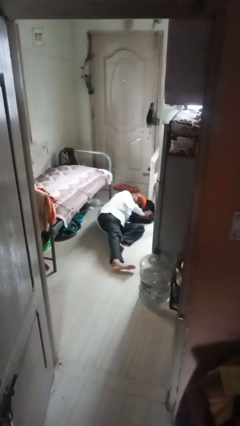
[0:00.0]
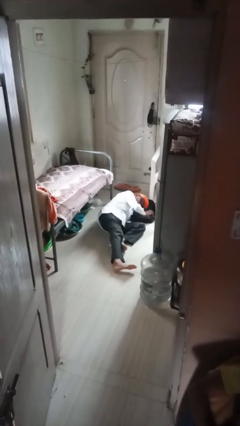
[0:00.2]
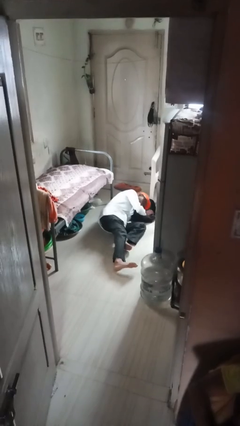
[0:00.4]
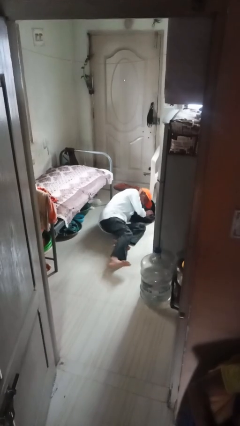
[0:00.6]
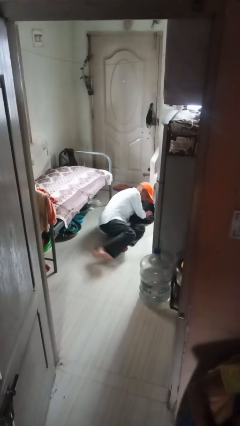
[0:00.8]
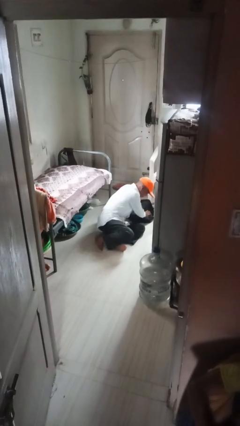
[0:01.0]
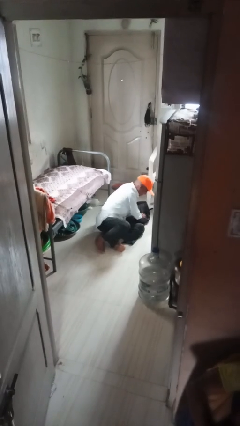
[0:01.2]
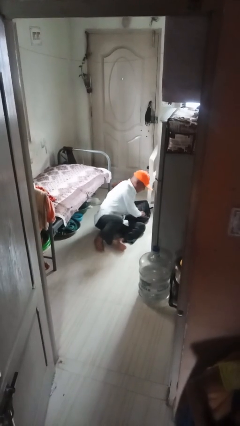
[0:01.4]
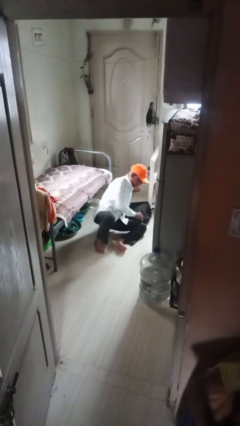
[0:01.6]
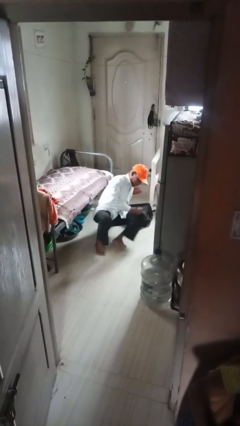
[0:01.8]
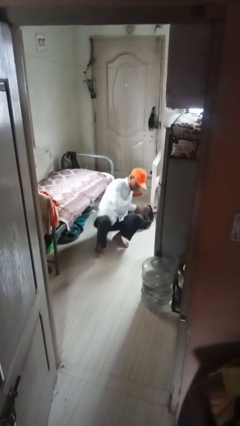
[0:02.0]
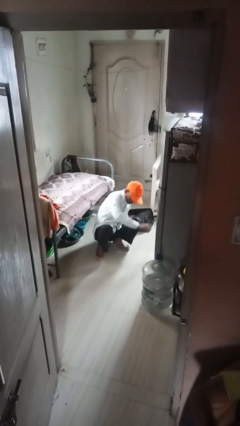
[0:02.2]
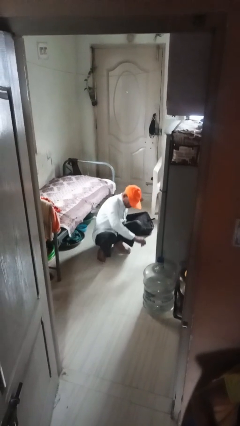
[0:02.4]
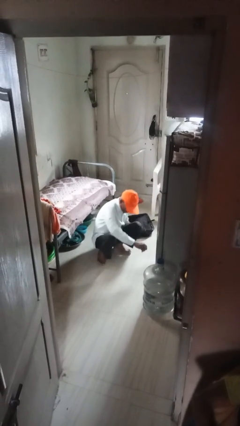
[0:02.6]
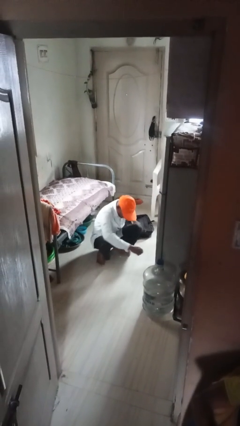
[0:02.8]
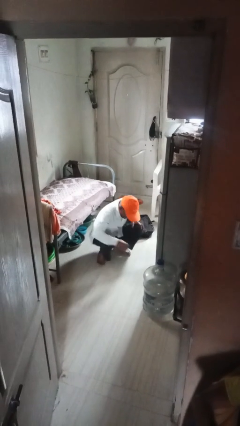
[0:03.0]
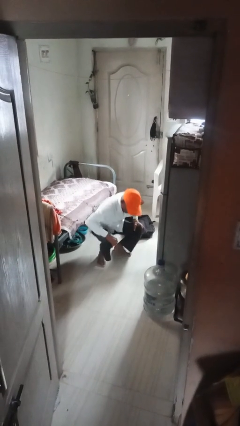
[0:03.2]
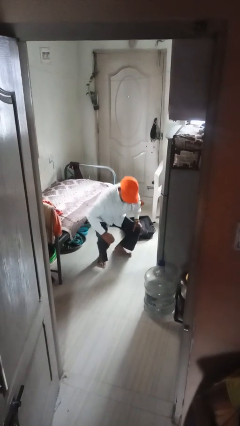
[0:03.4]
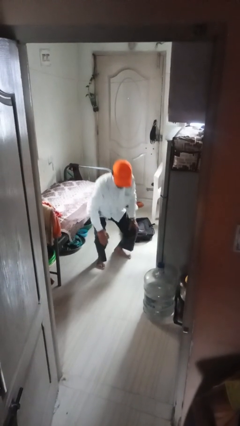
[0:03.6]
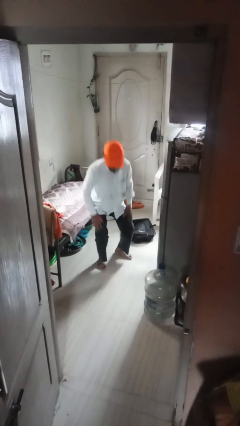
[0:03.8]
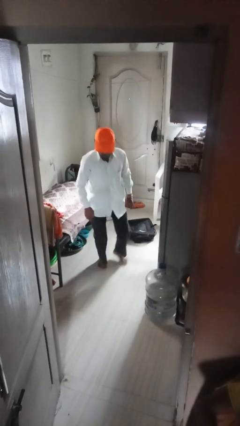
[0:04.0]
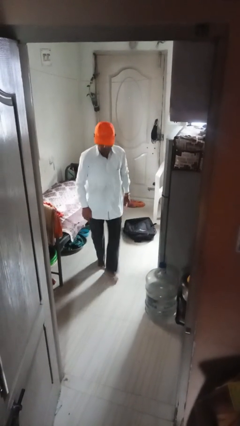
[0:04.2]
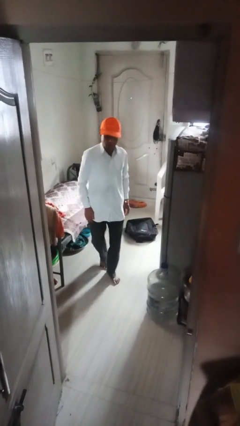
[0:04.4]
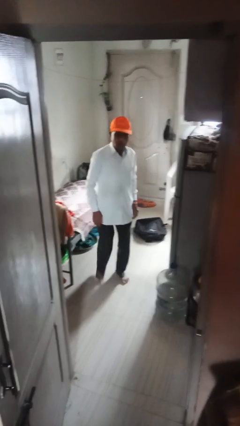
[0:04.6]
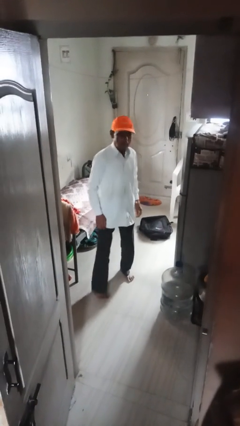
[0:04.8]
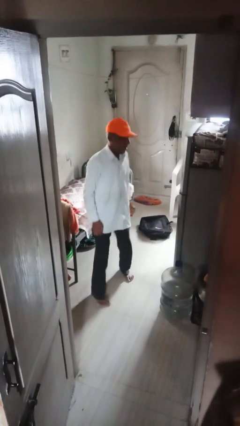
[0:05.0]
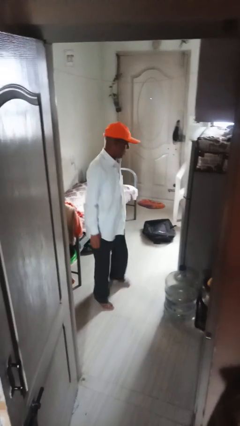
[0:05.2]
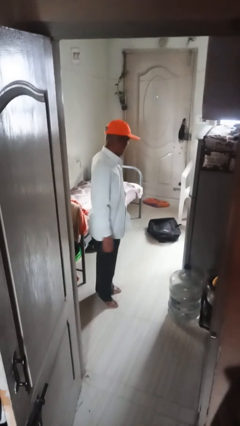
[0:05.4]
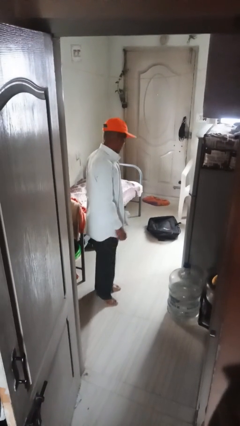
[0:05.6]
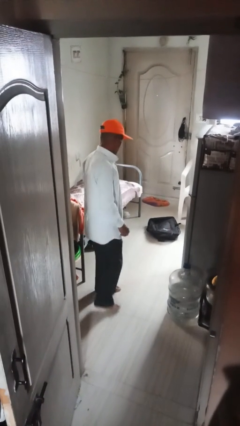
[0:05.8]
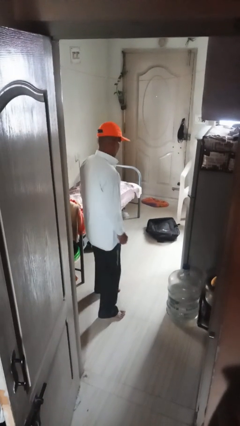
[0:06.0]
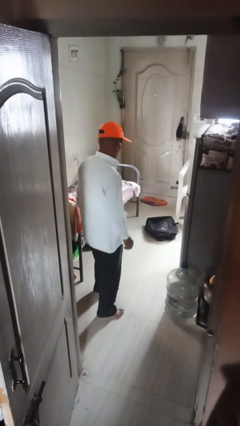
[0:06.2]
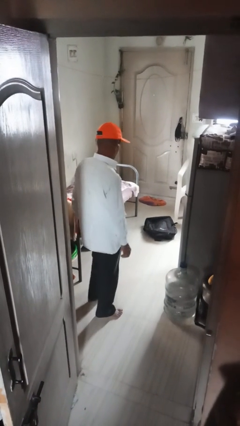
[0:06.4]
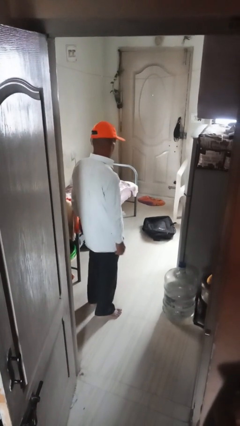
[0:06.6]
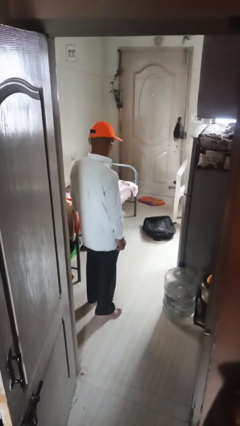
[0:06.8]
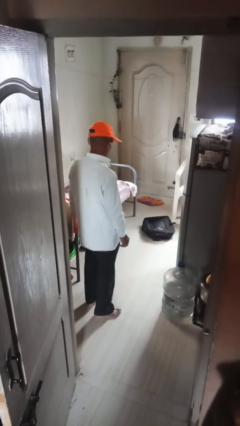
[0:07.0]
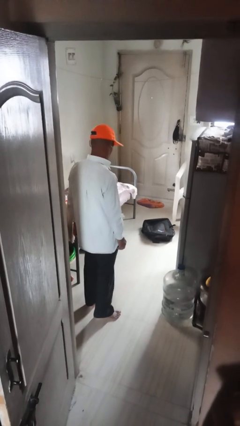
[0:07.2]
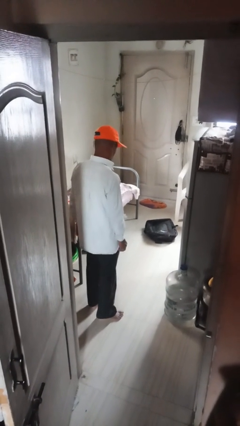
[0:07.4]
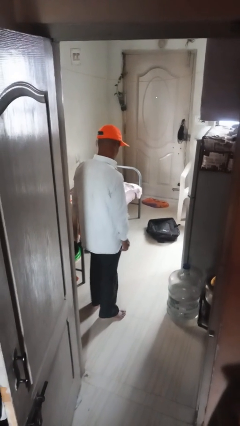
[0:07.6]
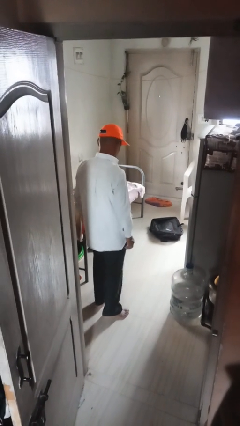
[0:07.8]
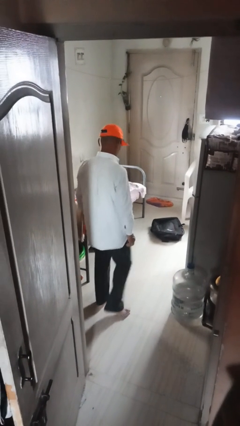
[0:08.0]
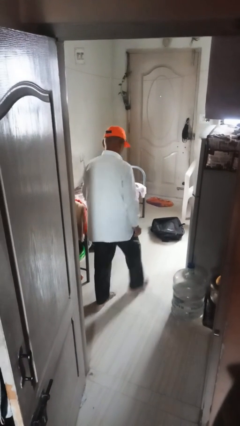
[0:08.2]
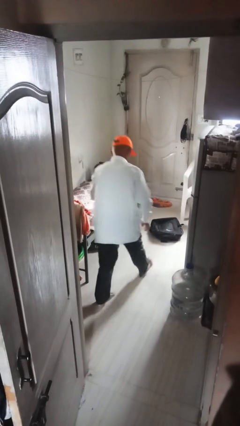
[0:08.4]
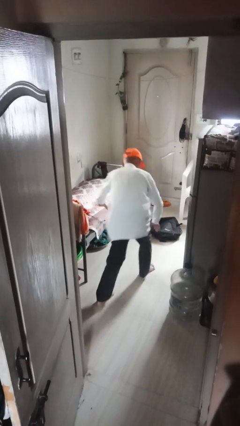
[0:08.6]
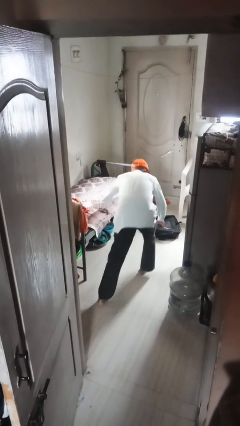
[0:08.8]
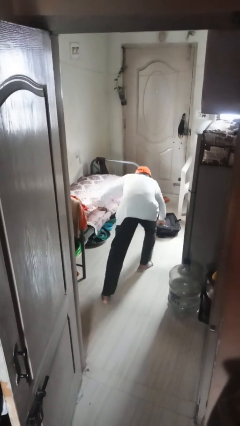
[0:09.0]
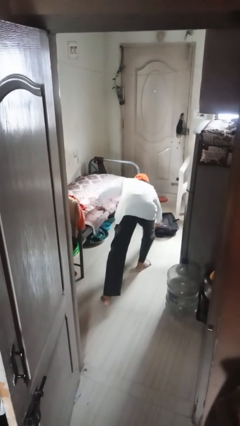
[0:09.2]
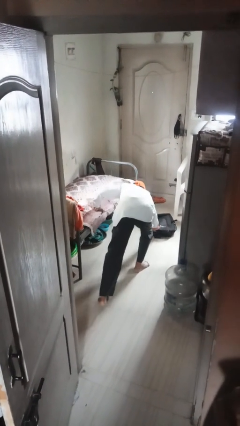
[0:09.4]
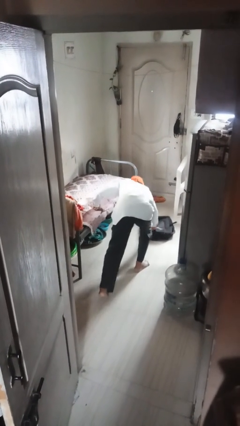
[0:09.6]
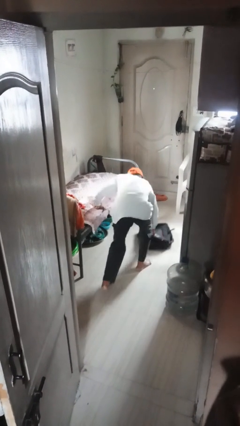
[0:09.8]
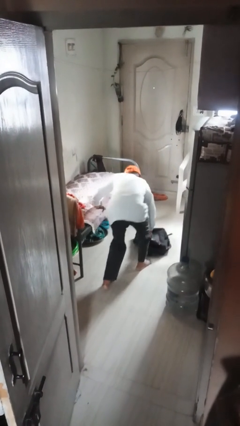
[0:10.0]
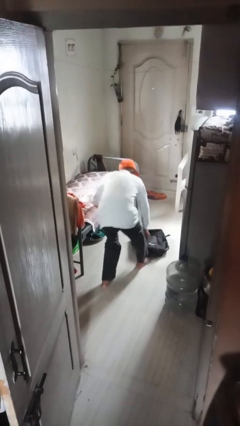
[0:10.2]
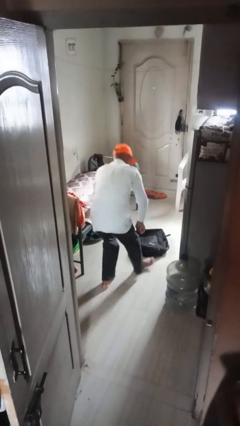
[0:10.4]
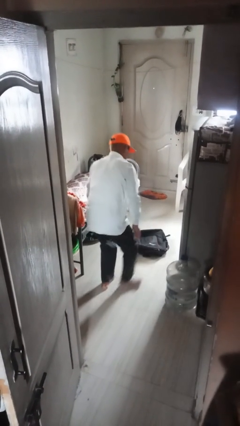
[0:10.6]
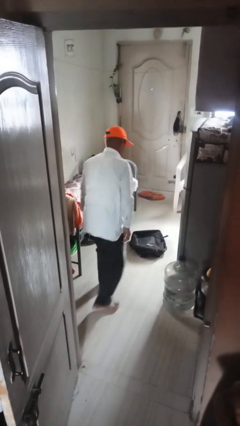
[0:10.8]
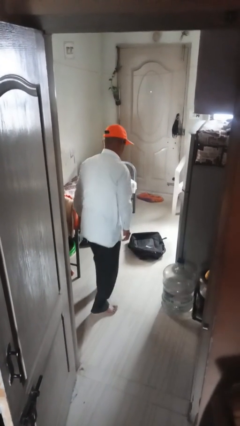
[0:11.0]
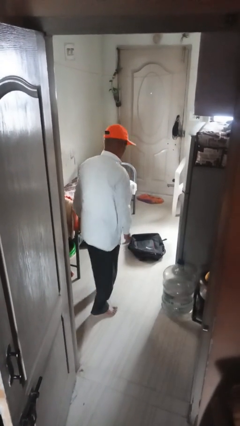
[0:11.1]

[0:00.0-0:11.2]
person stands up from floor

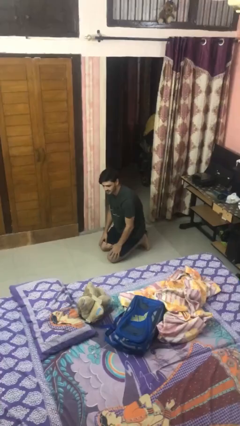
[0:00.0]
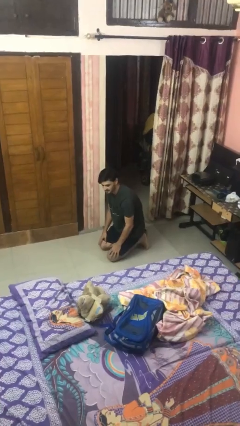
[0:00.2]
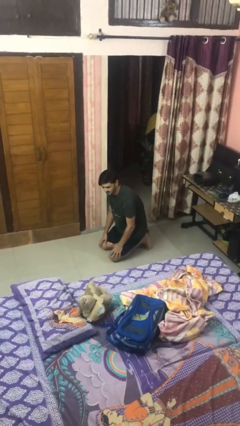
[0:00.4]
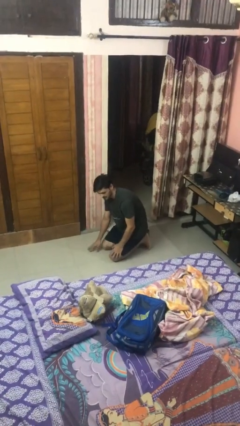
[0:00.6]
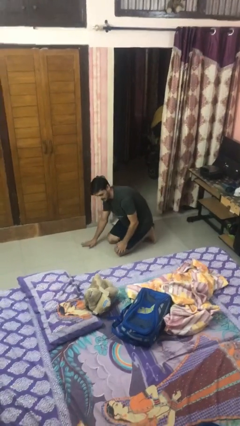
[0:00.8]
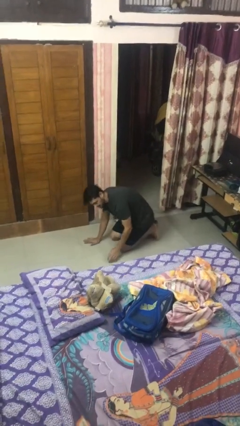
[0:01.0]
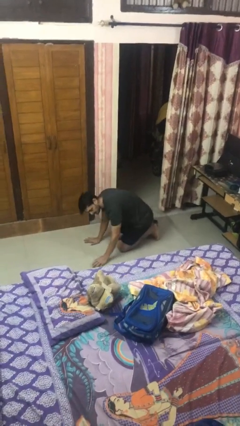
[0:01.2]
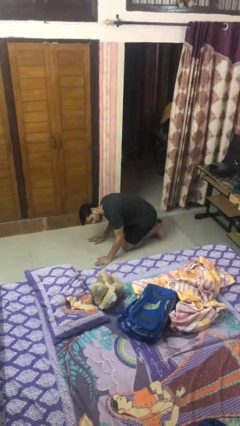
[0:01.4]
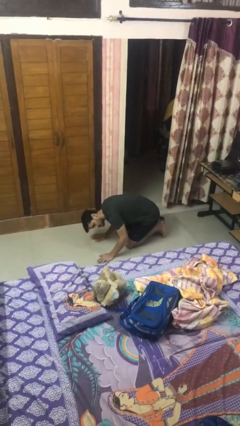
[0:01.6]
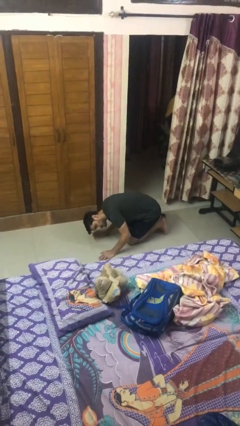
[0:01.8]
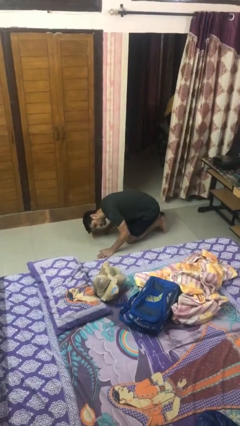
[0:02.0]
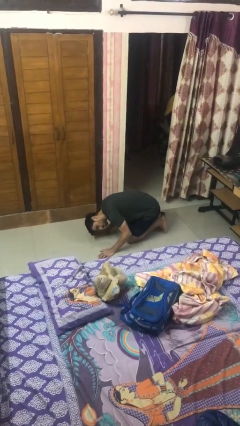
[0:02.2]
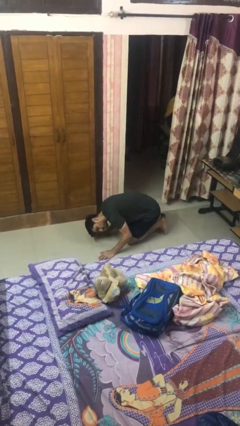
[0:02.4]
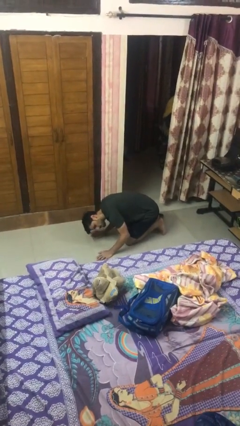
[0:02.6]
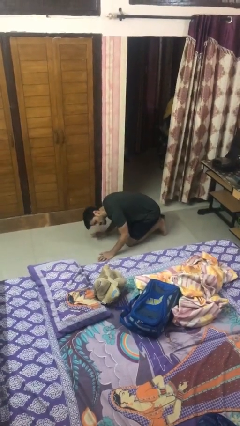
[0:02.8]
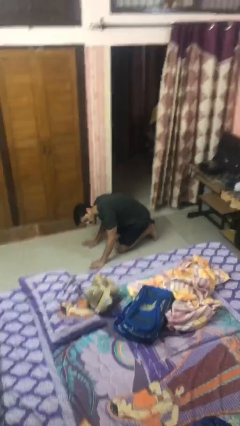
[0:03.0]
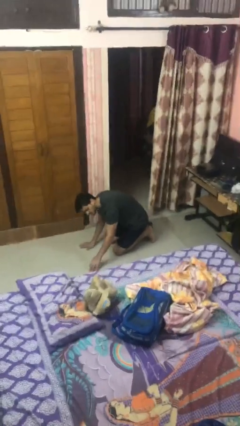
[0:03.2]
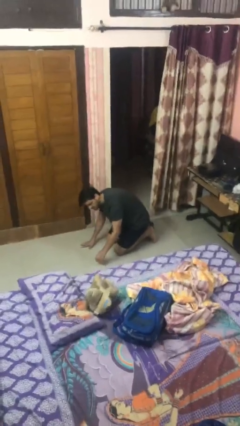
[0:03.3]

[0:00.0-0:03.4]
person searches under bed

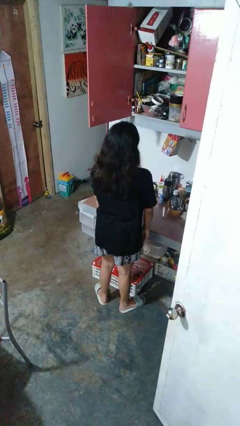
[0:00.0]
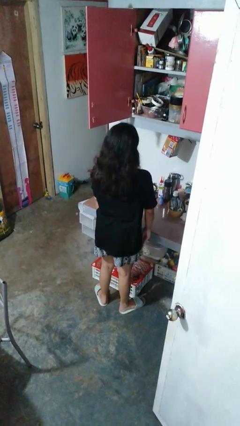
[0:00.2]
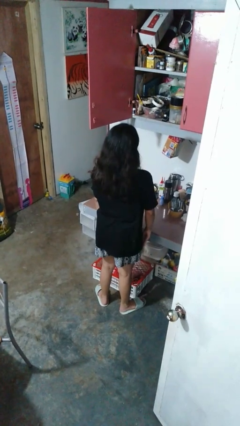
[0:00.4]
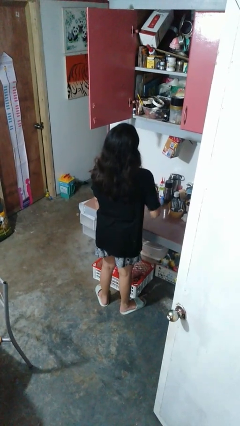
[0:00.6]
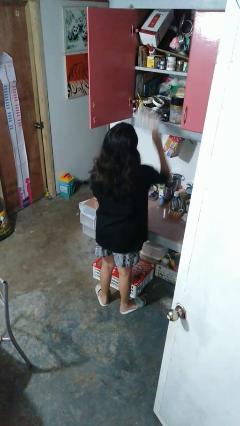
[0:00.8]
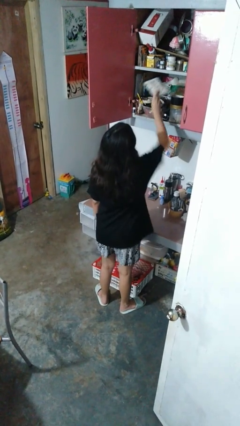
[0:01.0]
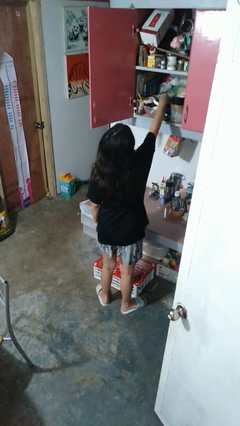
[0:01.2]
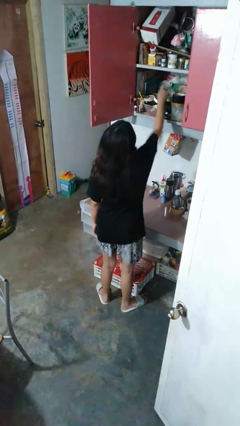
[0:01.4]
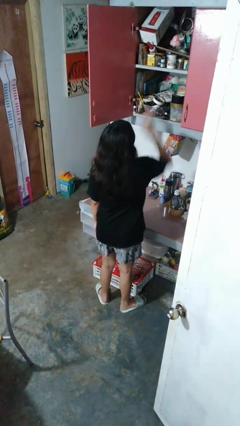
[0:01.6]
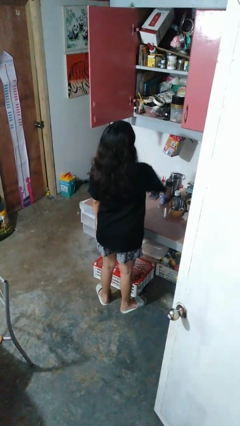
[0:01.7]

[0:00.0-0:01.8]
person puts object in cabinet

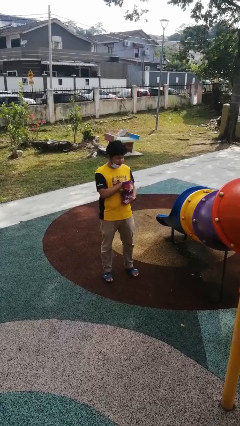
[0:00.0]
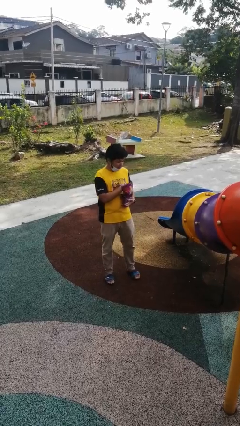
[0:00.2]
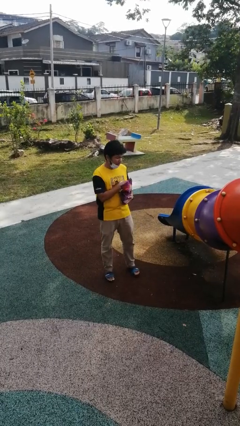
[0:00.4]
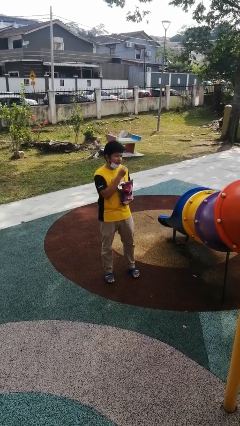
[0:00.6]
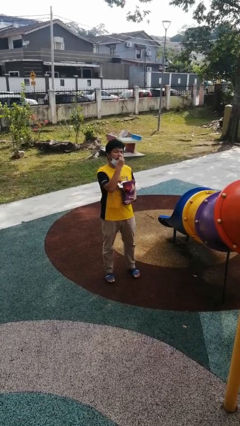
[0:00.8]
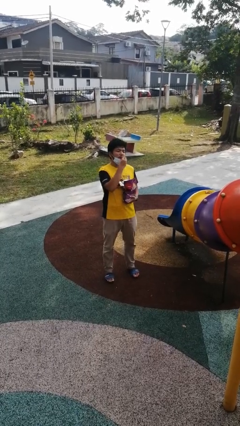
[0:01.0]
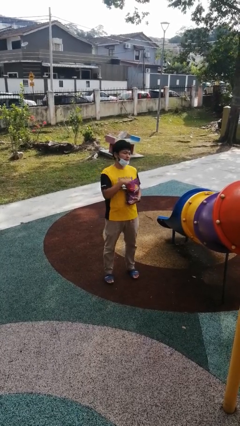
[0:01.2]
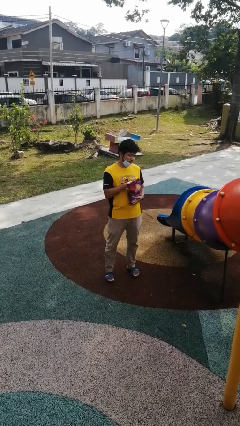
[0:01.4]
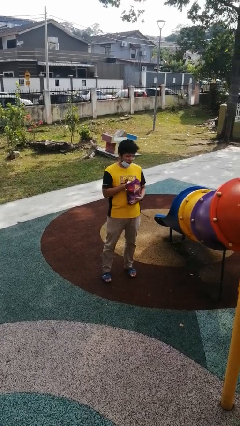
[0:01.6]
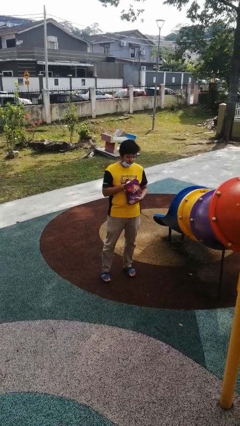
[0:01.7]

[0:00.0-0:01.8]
person eats snack from bag

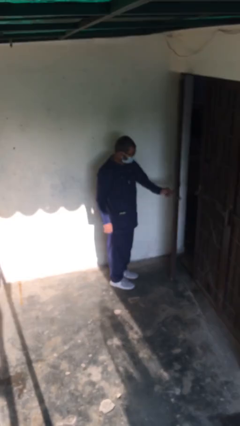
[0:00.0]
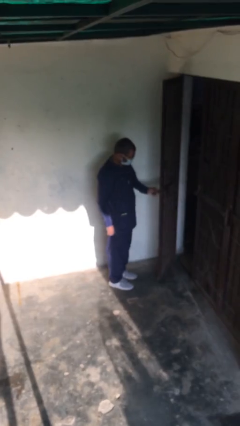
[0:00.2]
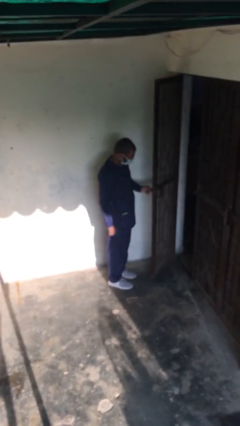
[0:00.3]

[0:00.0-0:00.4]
person opens facility door
